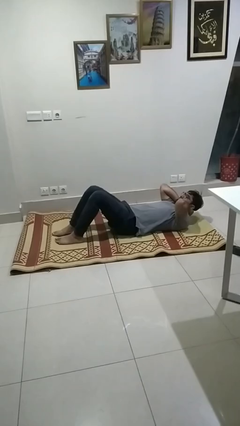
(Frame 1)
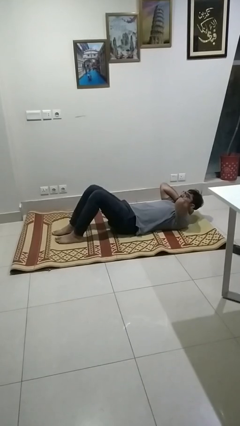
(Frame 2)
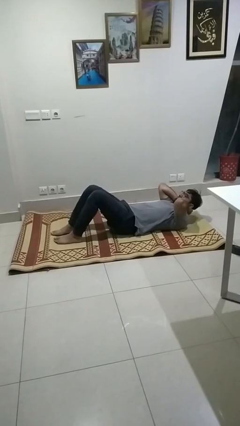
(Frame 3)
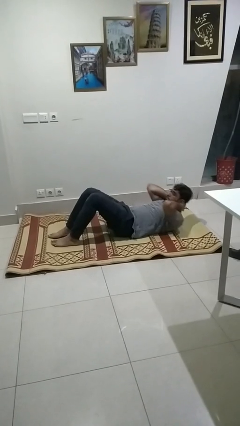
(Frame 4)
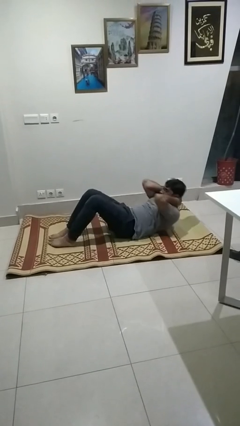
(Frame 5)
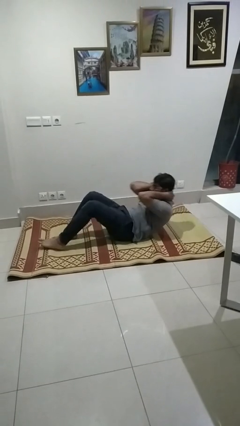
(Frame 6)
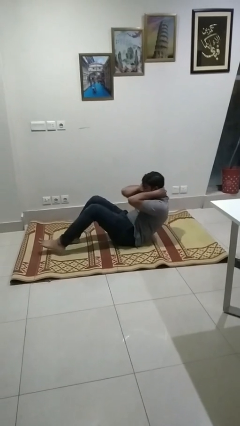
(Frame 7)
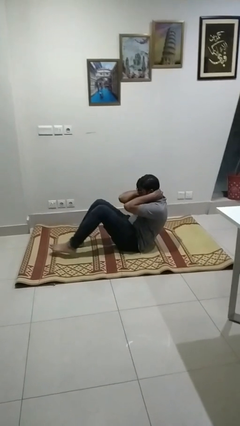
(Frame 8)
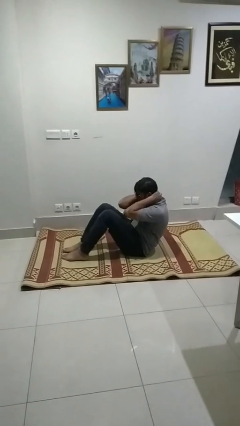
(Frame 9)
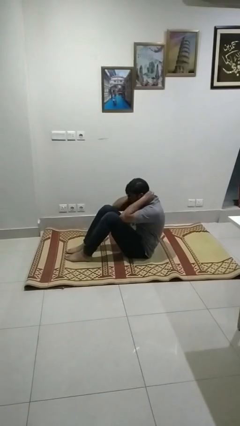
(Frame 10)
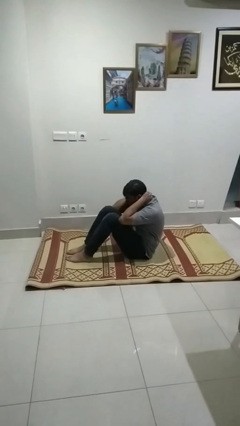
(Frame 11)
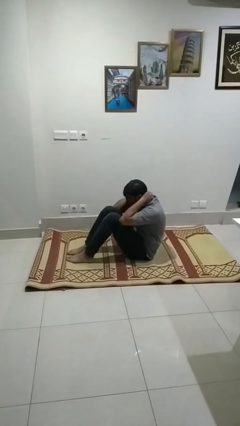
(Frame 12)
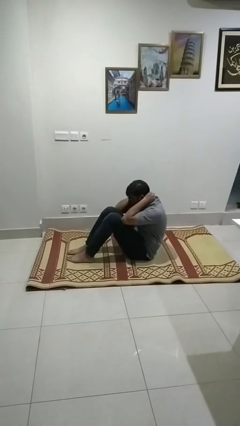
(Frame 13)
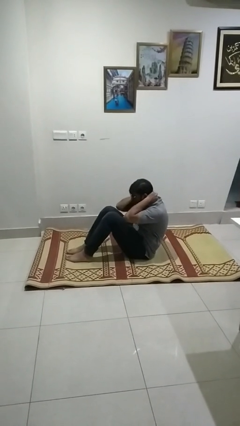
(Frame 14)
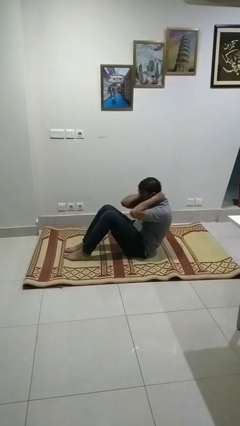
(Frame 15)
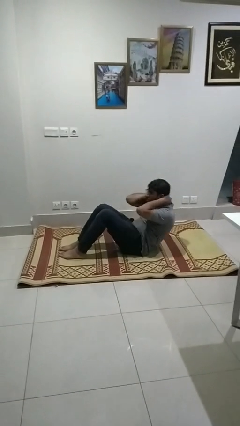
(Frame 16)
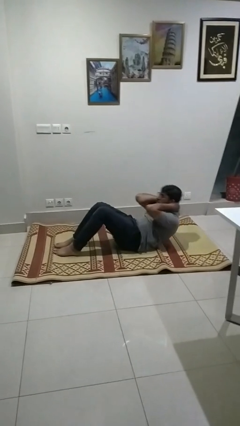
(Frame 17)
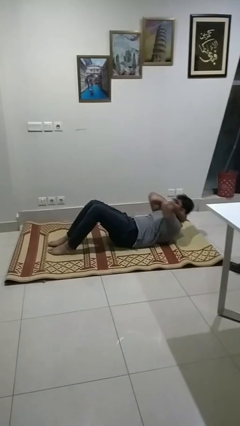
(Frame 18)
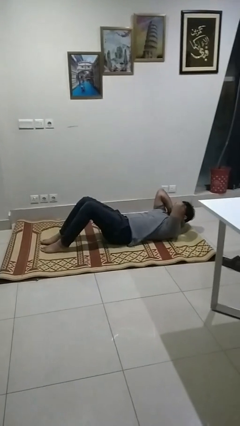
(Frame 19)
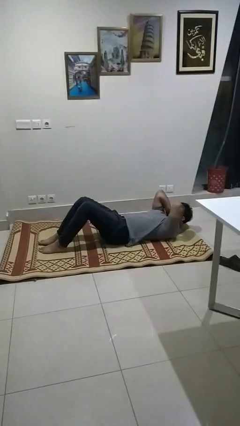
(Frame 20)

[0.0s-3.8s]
person exercises with situp

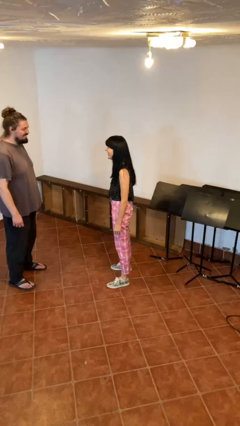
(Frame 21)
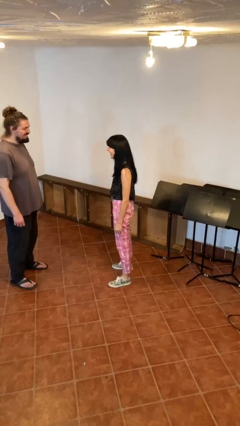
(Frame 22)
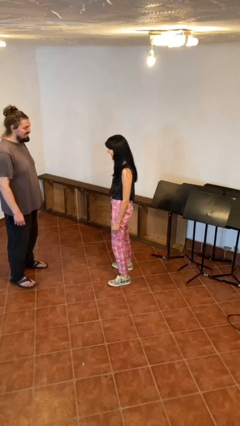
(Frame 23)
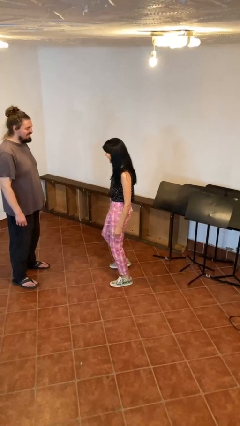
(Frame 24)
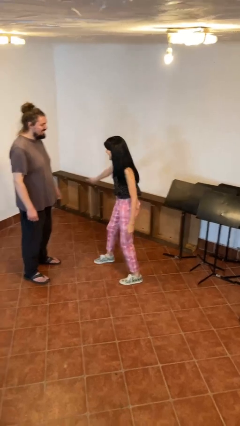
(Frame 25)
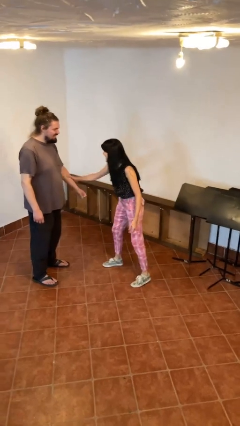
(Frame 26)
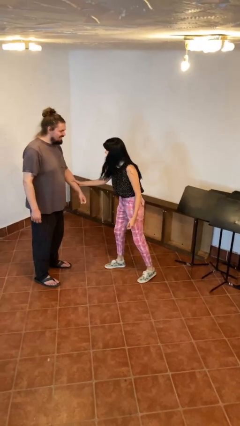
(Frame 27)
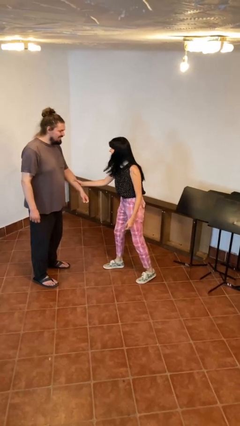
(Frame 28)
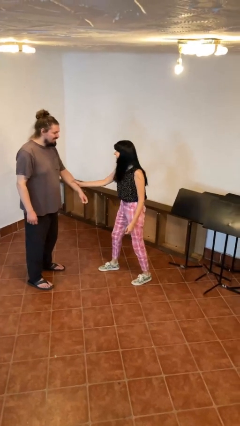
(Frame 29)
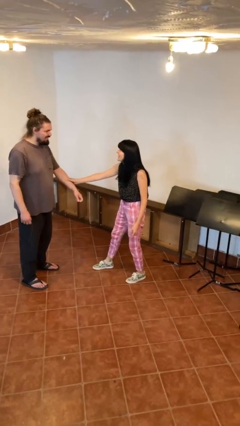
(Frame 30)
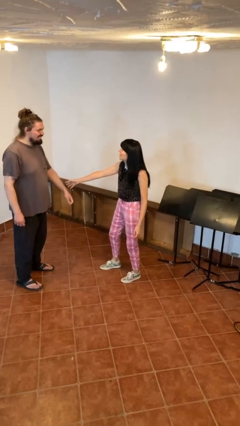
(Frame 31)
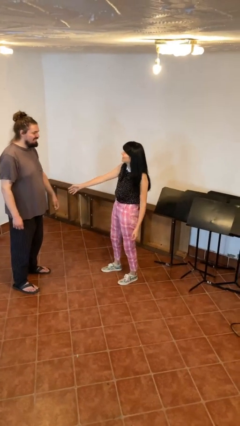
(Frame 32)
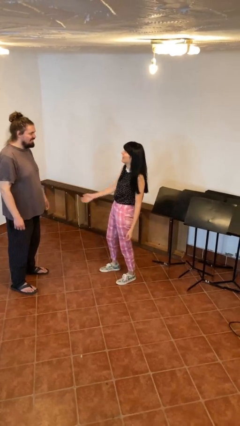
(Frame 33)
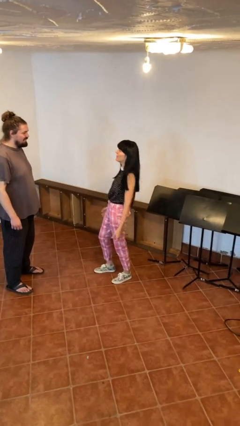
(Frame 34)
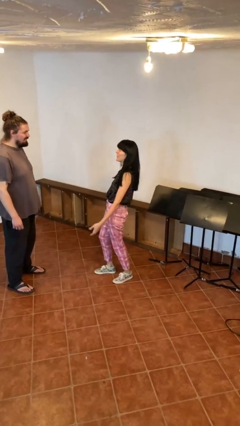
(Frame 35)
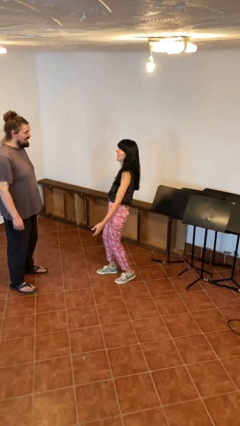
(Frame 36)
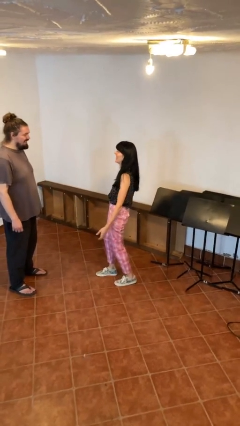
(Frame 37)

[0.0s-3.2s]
person grabs person by forearm

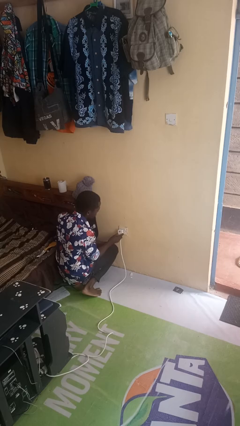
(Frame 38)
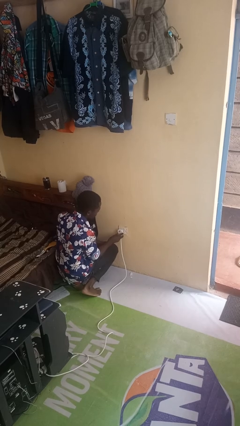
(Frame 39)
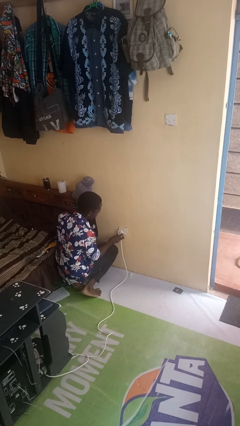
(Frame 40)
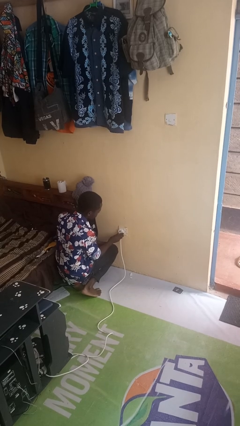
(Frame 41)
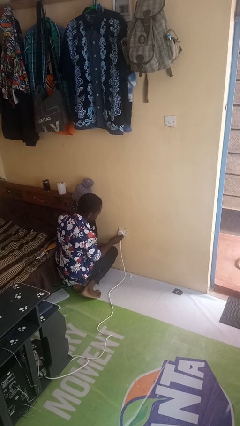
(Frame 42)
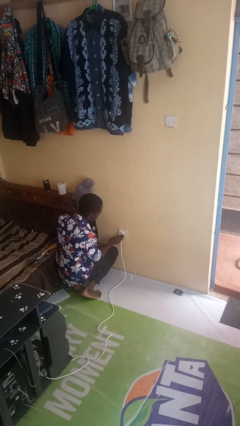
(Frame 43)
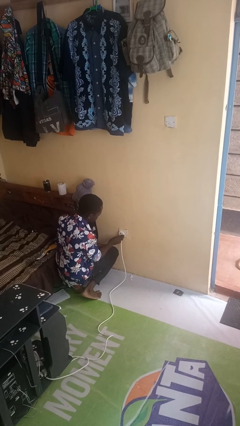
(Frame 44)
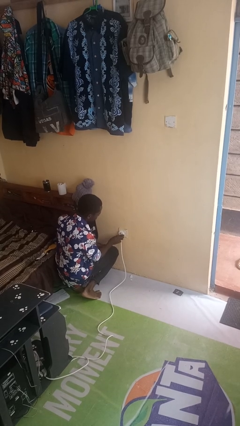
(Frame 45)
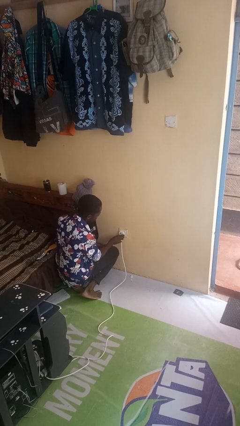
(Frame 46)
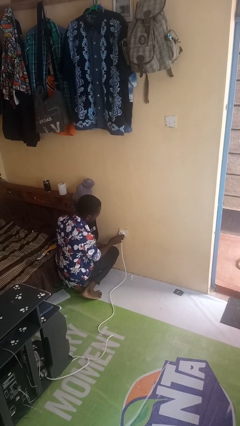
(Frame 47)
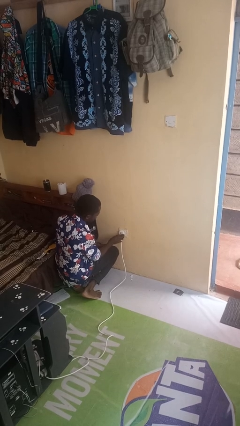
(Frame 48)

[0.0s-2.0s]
person plugs into electrical socket

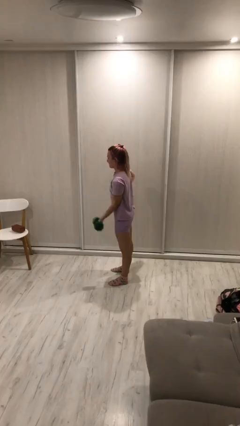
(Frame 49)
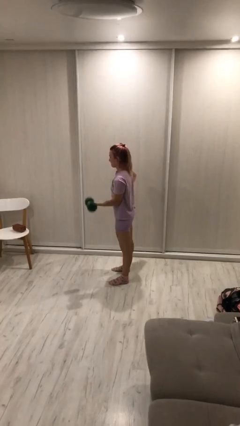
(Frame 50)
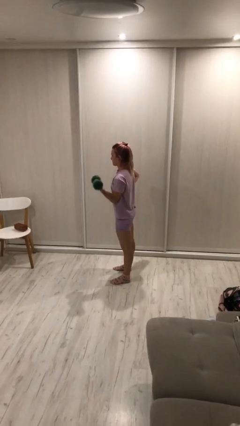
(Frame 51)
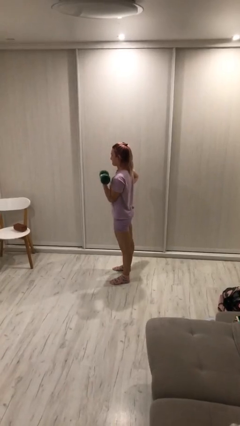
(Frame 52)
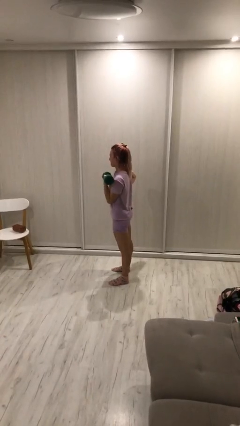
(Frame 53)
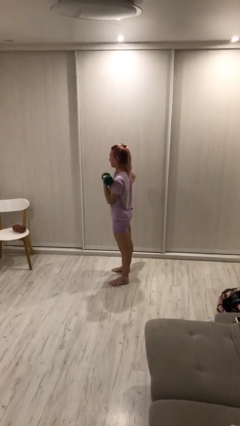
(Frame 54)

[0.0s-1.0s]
person lifts dumbbells

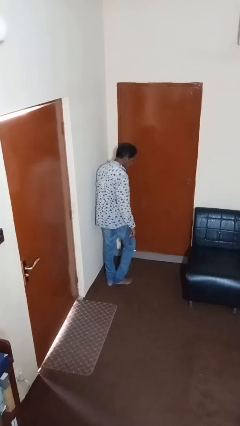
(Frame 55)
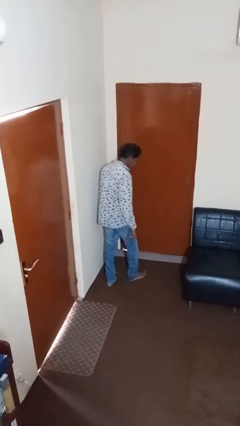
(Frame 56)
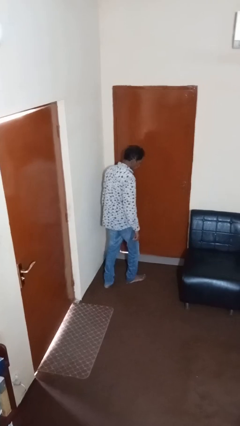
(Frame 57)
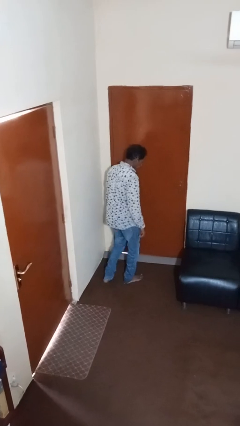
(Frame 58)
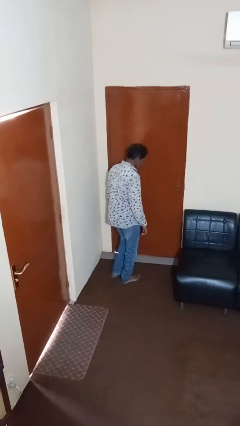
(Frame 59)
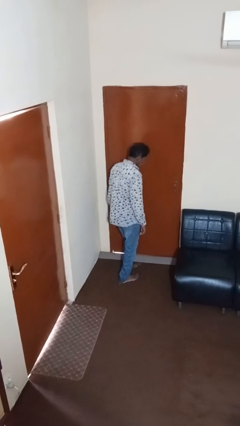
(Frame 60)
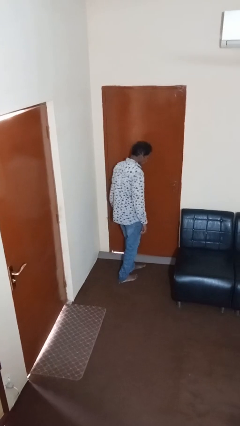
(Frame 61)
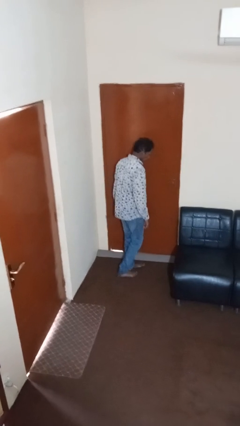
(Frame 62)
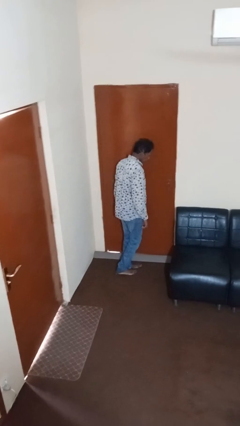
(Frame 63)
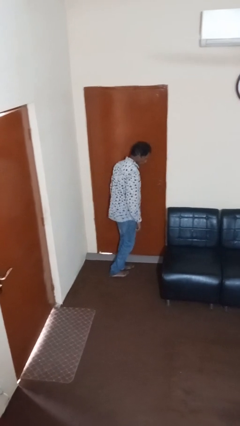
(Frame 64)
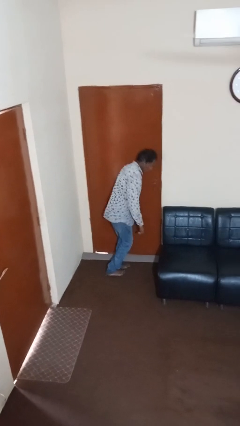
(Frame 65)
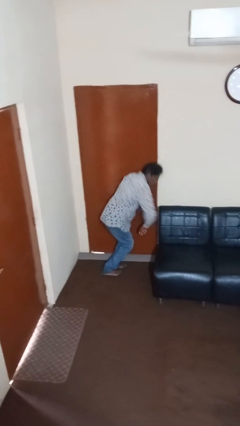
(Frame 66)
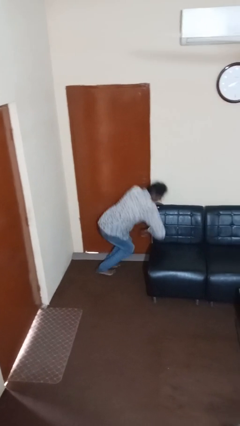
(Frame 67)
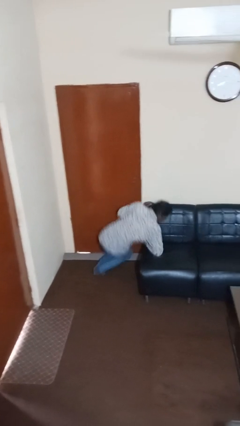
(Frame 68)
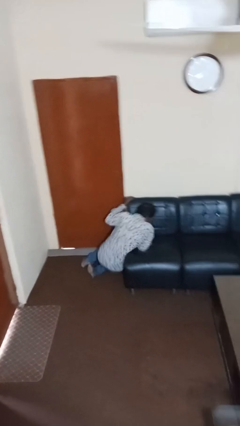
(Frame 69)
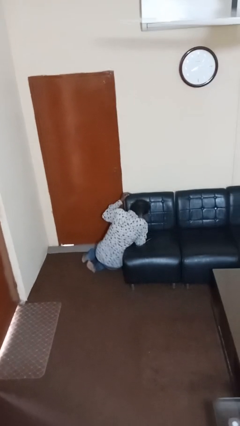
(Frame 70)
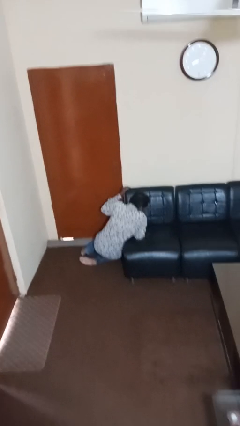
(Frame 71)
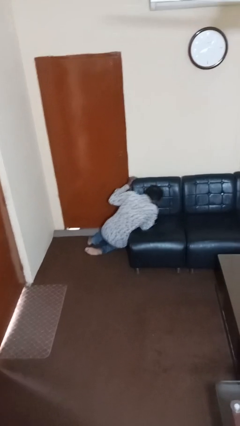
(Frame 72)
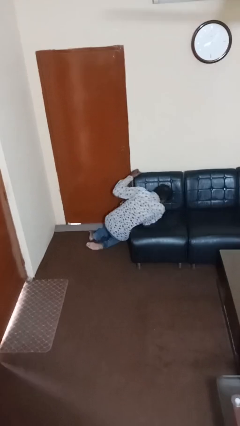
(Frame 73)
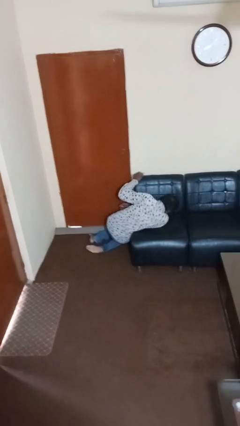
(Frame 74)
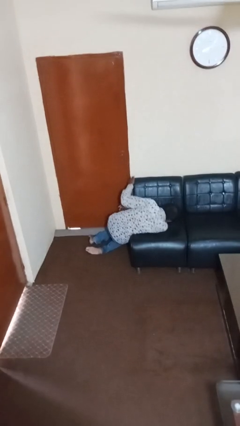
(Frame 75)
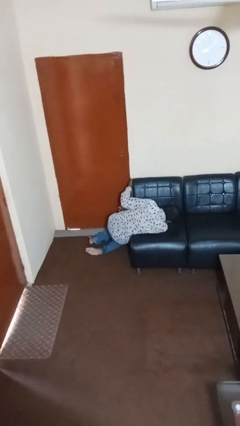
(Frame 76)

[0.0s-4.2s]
person bumps into wall

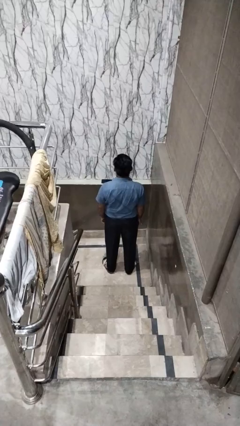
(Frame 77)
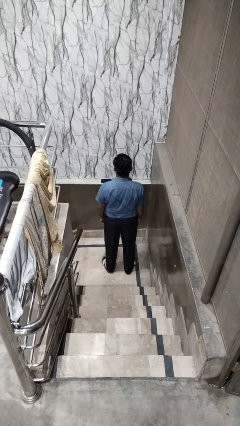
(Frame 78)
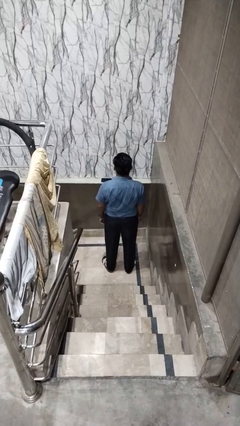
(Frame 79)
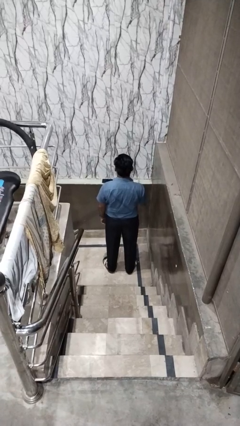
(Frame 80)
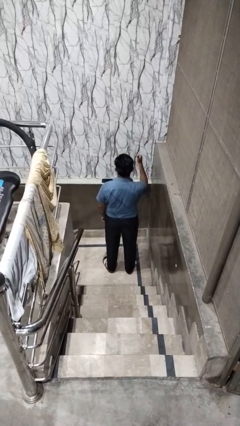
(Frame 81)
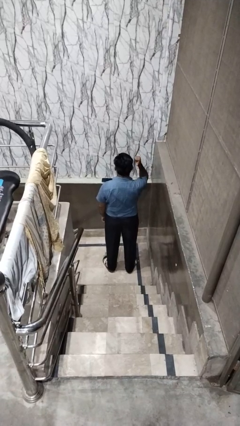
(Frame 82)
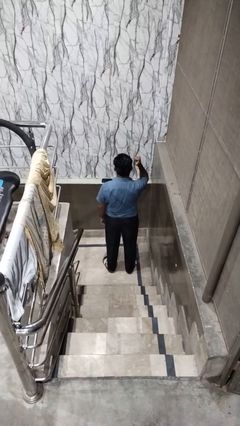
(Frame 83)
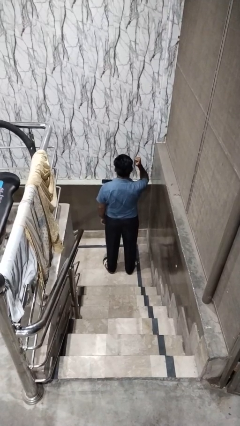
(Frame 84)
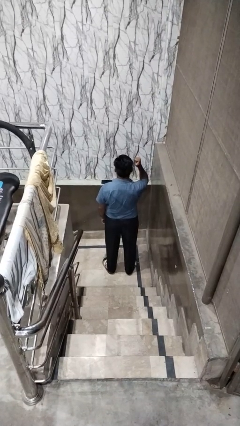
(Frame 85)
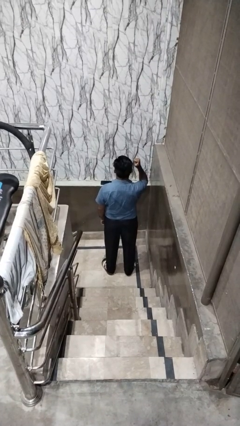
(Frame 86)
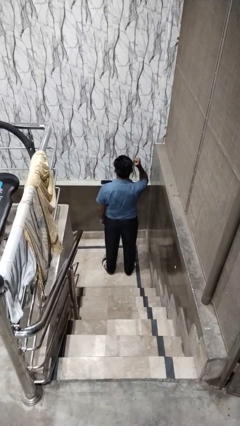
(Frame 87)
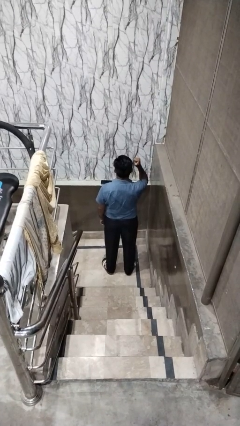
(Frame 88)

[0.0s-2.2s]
person gestures behind me

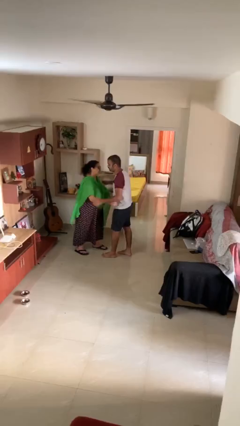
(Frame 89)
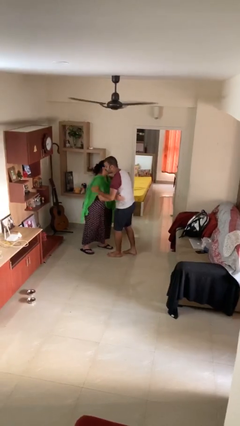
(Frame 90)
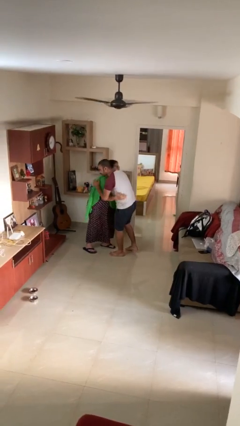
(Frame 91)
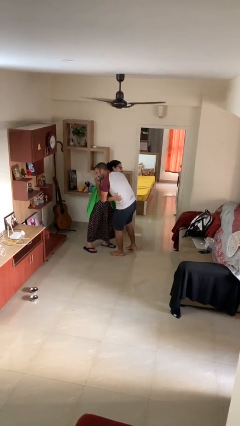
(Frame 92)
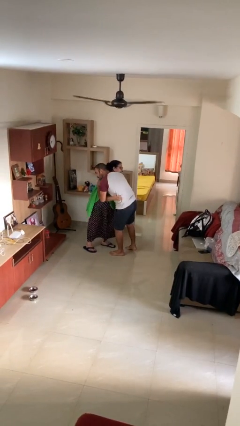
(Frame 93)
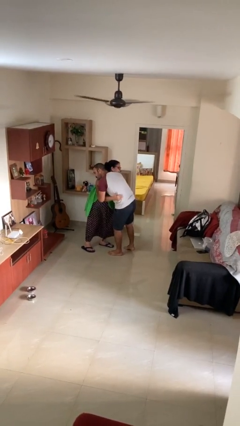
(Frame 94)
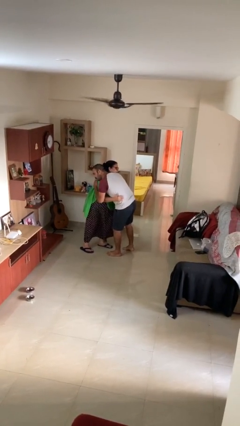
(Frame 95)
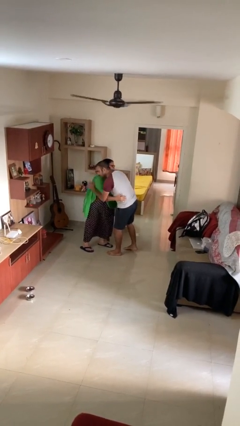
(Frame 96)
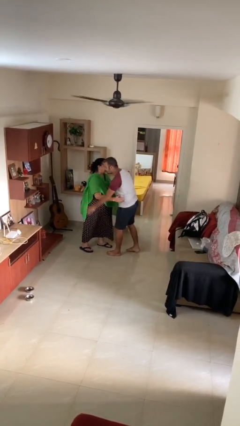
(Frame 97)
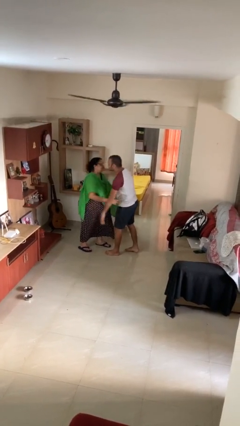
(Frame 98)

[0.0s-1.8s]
person embraces person
